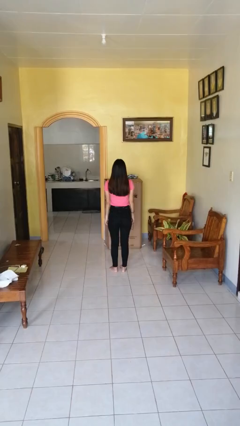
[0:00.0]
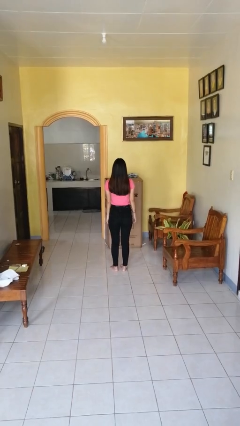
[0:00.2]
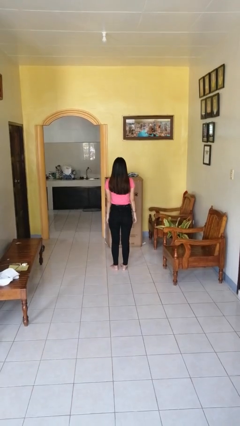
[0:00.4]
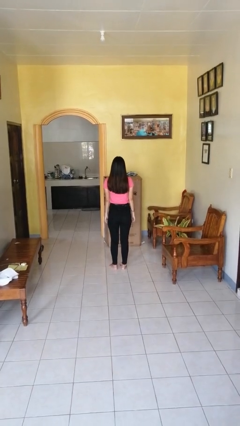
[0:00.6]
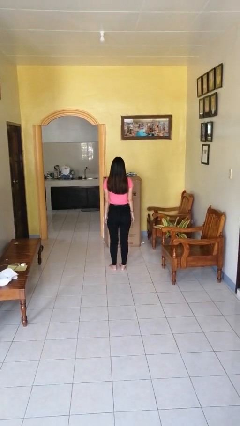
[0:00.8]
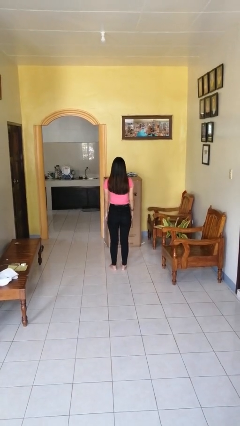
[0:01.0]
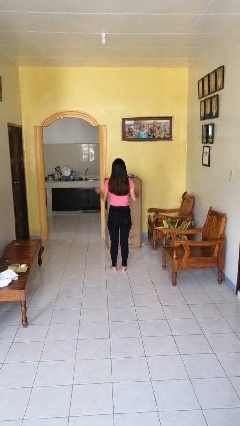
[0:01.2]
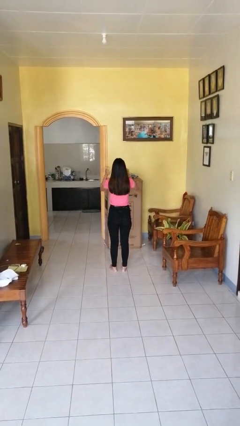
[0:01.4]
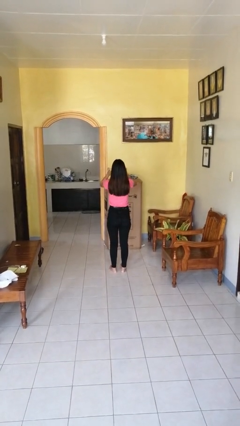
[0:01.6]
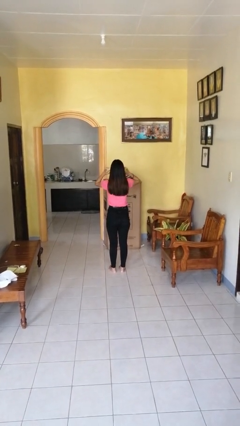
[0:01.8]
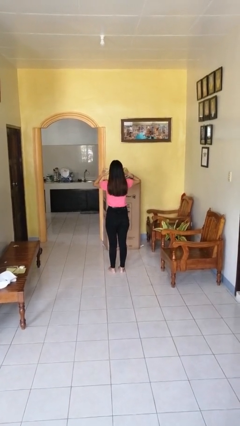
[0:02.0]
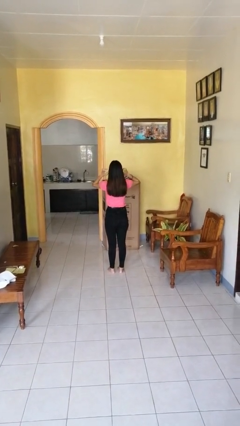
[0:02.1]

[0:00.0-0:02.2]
person puts fingers in ear

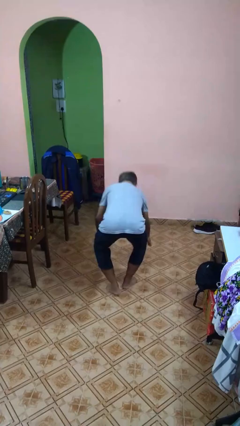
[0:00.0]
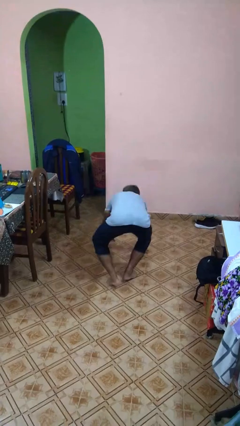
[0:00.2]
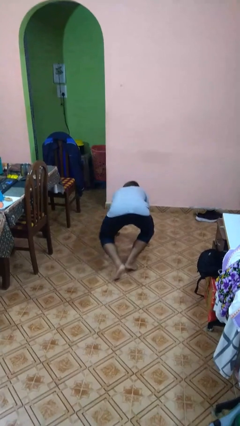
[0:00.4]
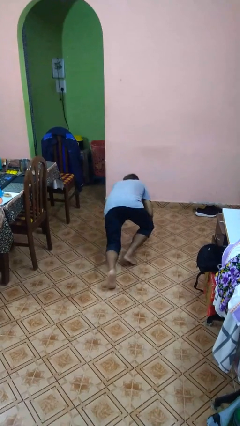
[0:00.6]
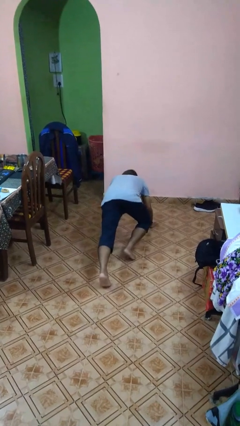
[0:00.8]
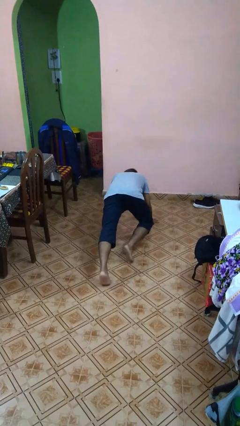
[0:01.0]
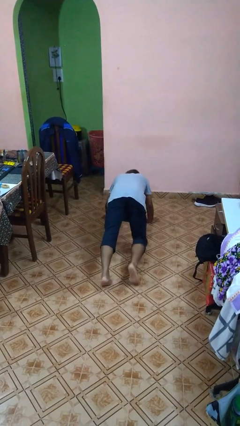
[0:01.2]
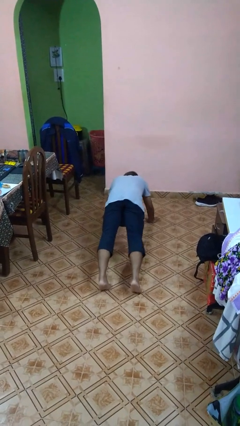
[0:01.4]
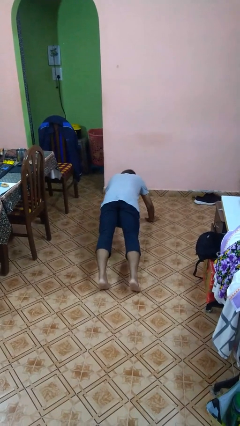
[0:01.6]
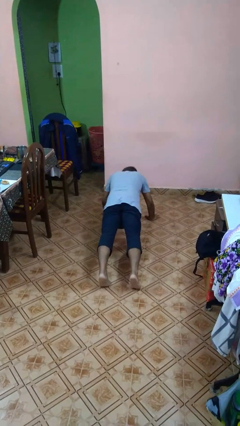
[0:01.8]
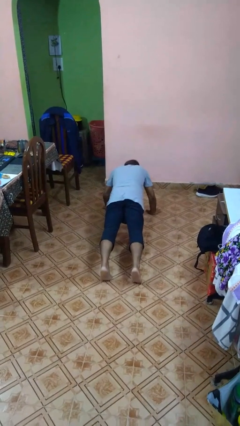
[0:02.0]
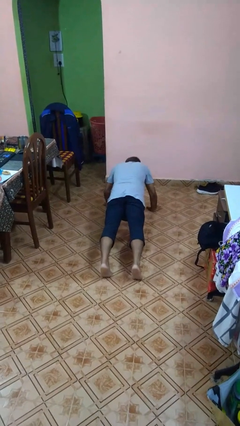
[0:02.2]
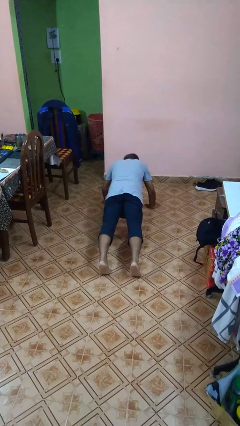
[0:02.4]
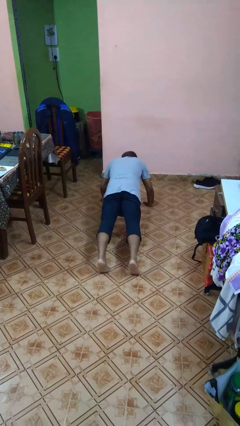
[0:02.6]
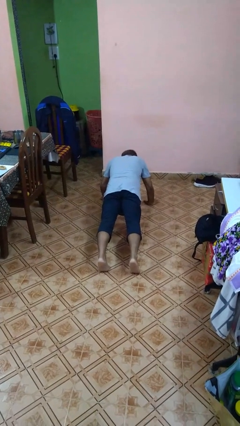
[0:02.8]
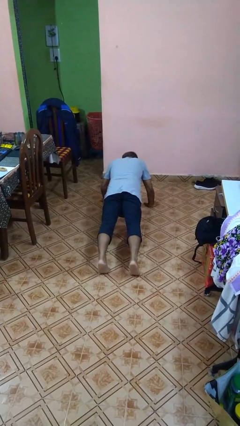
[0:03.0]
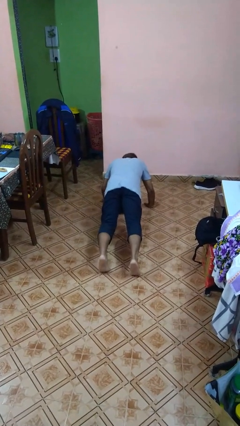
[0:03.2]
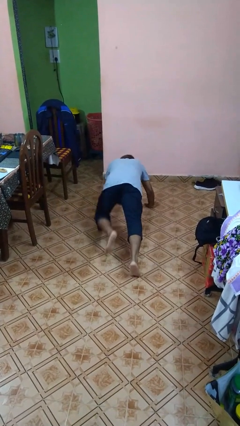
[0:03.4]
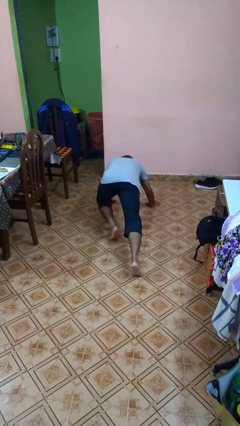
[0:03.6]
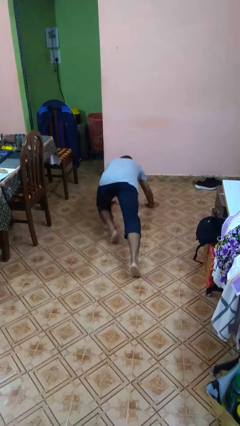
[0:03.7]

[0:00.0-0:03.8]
person exercises with plank

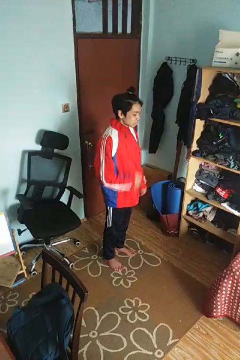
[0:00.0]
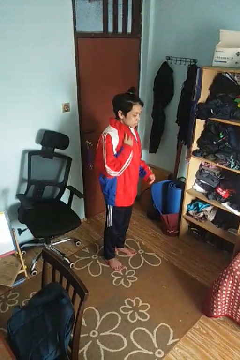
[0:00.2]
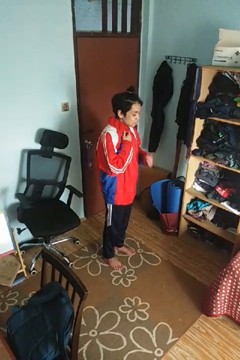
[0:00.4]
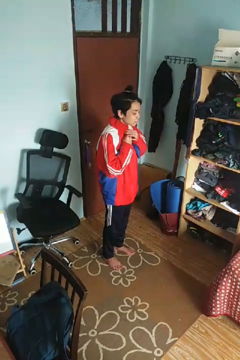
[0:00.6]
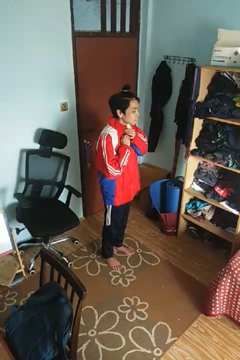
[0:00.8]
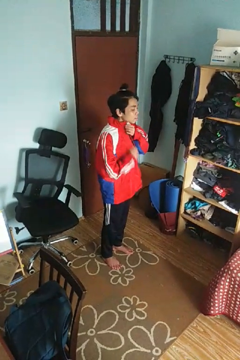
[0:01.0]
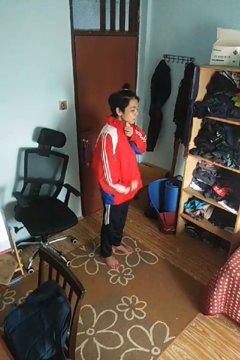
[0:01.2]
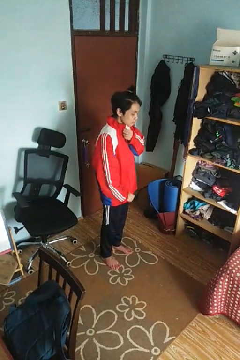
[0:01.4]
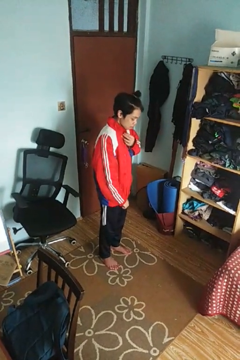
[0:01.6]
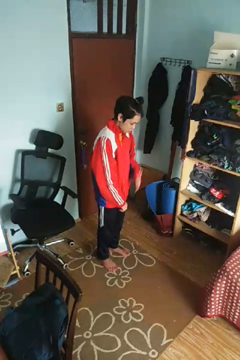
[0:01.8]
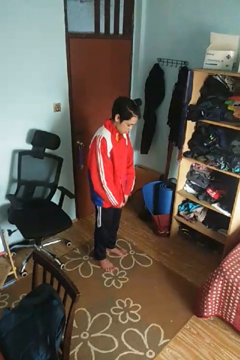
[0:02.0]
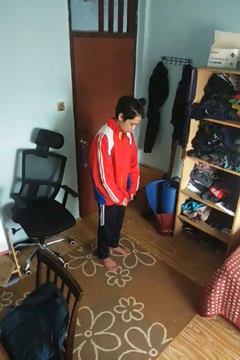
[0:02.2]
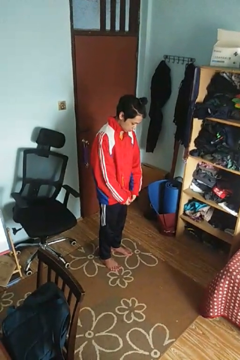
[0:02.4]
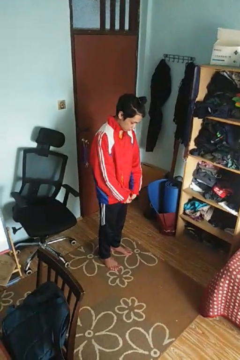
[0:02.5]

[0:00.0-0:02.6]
person unzips jacket

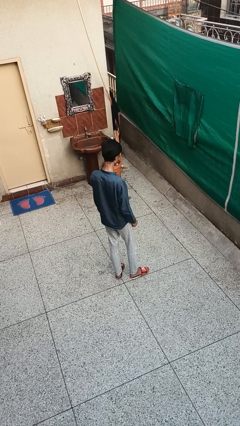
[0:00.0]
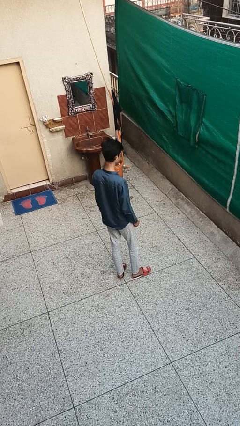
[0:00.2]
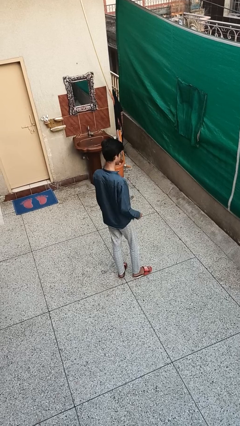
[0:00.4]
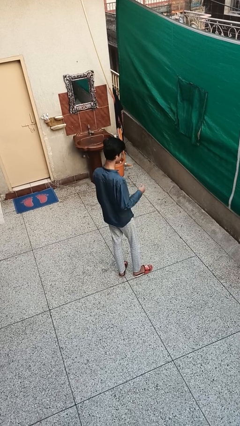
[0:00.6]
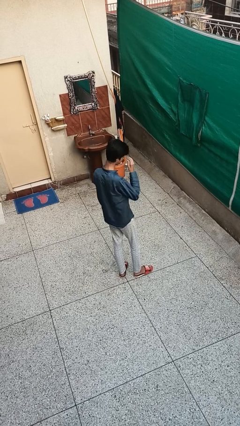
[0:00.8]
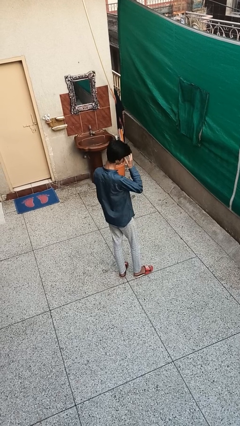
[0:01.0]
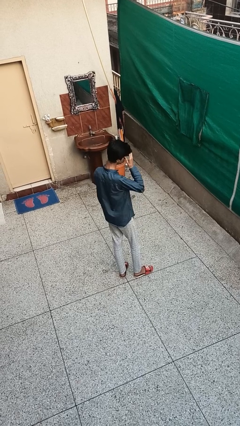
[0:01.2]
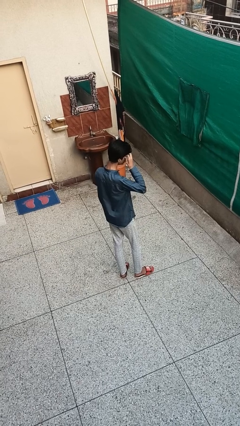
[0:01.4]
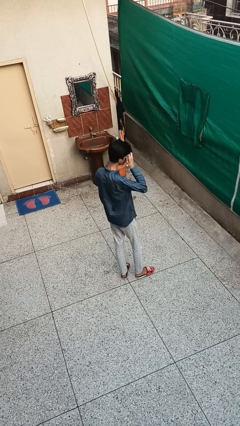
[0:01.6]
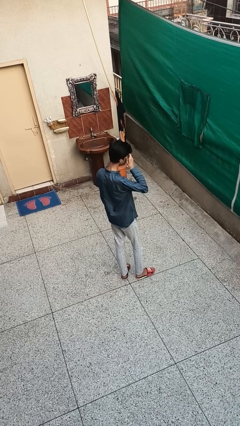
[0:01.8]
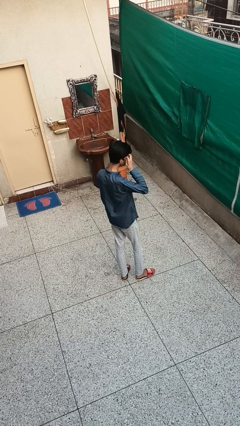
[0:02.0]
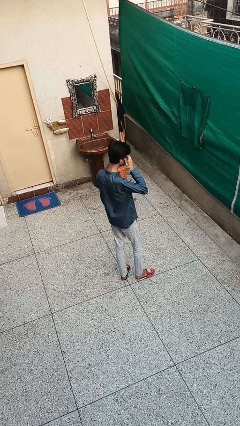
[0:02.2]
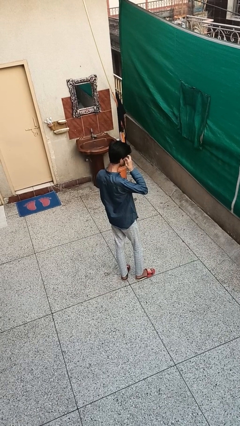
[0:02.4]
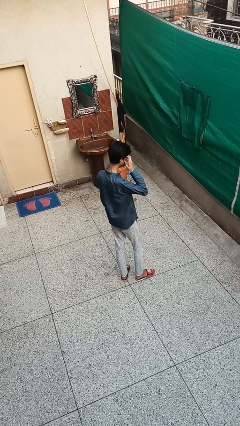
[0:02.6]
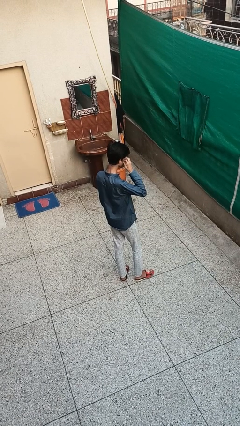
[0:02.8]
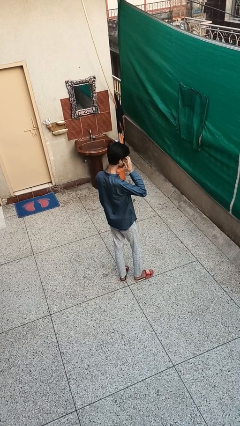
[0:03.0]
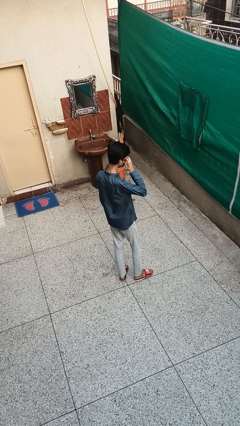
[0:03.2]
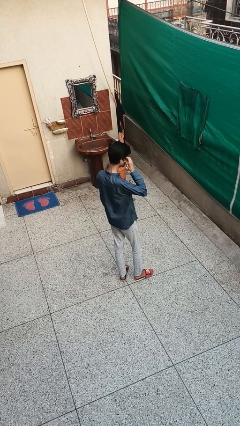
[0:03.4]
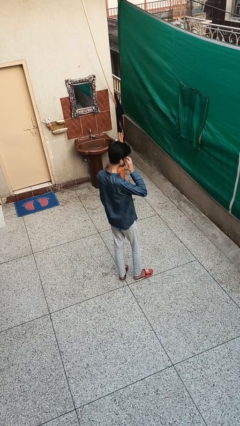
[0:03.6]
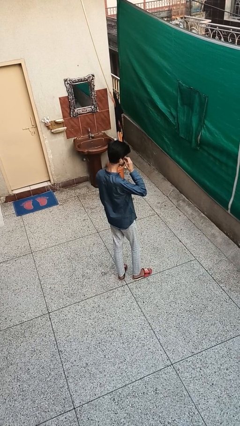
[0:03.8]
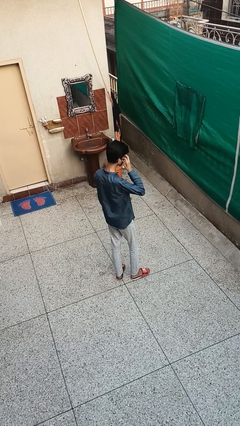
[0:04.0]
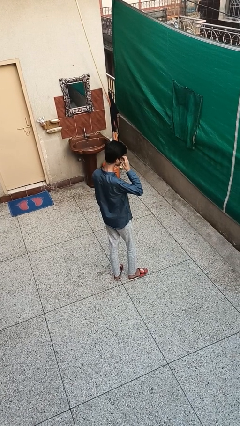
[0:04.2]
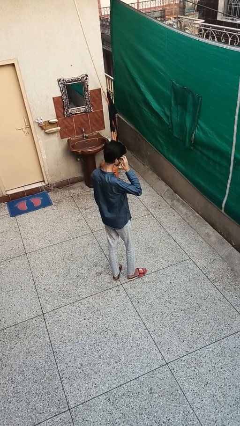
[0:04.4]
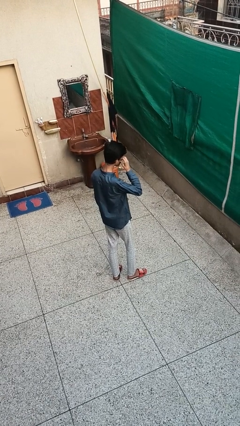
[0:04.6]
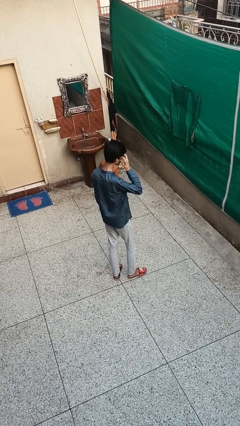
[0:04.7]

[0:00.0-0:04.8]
person scratches face

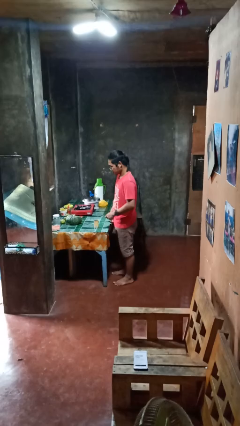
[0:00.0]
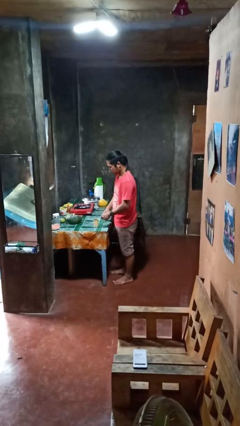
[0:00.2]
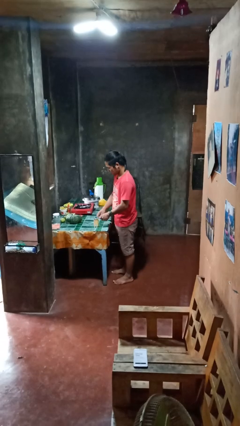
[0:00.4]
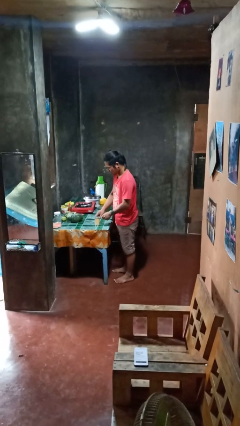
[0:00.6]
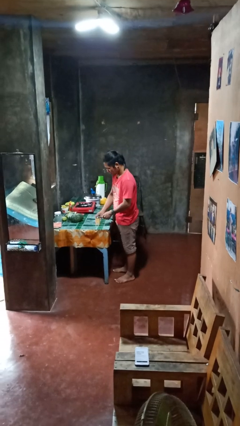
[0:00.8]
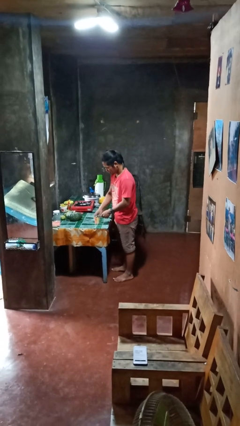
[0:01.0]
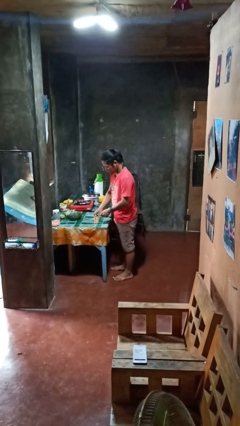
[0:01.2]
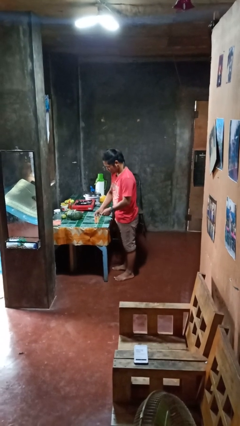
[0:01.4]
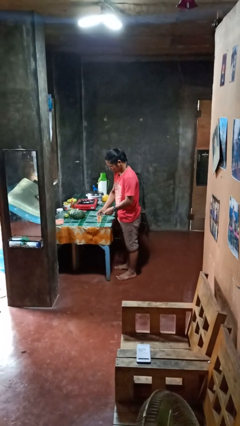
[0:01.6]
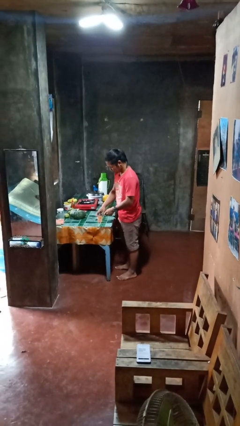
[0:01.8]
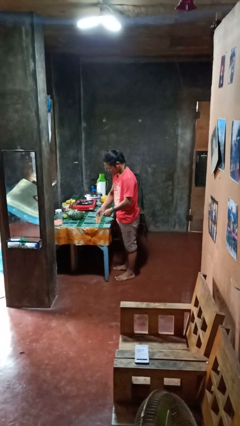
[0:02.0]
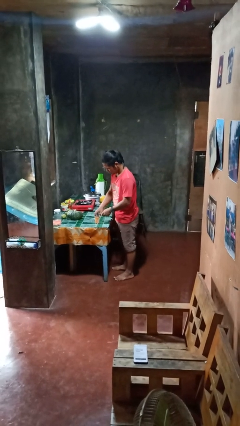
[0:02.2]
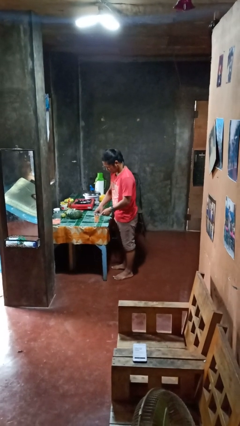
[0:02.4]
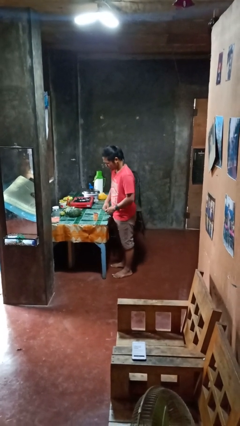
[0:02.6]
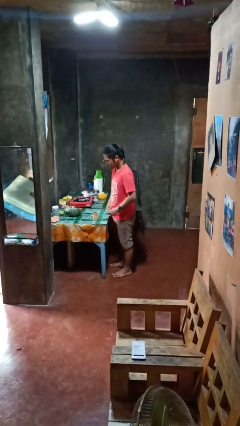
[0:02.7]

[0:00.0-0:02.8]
person opens can with can opener

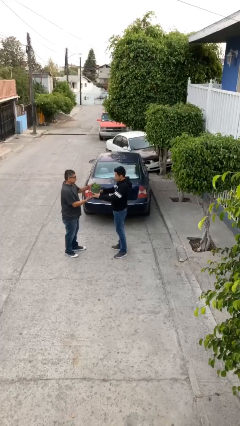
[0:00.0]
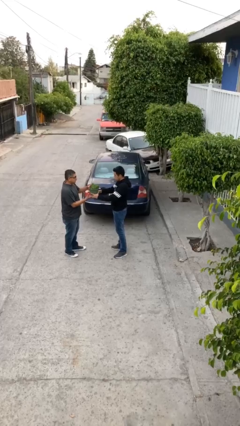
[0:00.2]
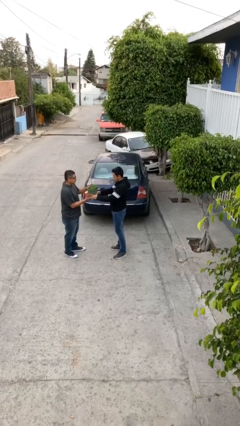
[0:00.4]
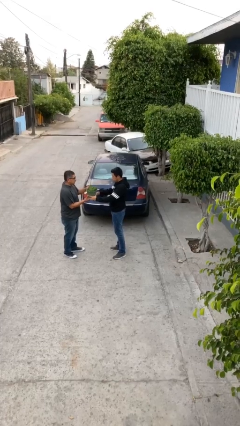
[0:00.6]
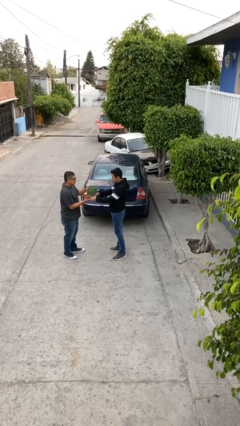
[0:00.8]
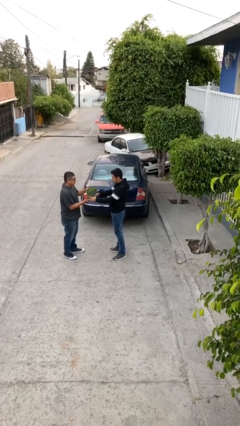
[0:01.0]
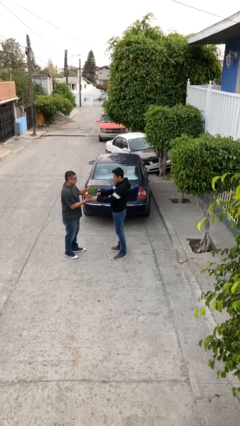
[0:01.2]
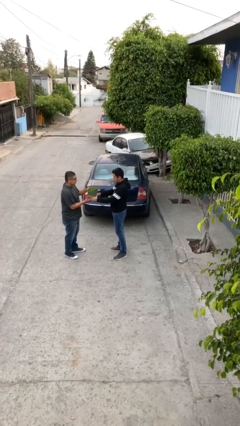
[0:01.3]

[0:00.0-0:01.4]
person transfers object to person

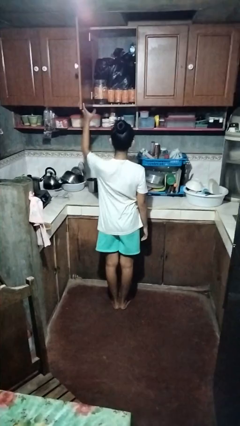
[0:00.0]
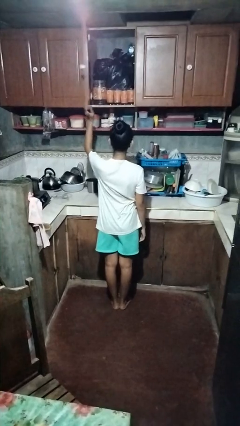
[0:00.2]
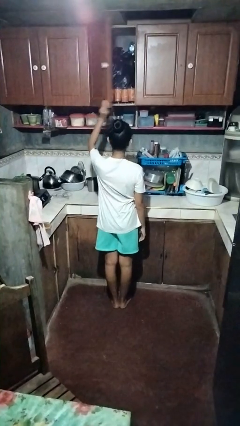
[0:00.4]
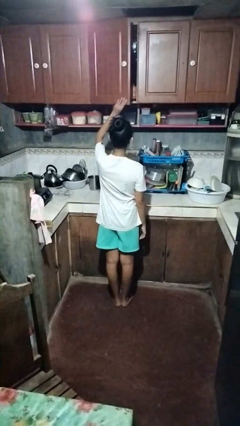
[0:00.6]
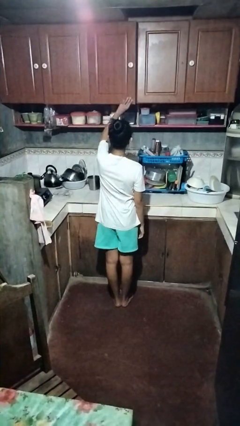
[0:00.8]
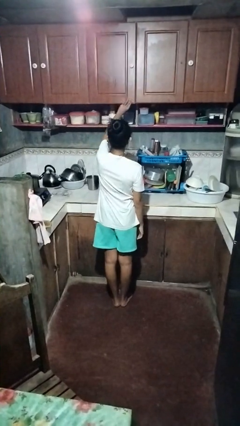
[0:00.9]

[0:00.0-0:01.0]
person closes cabinet
